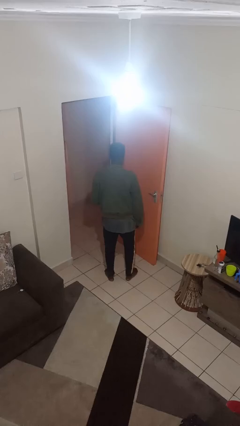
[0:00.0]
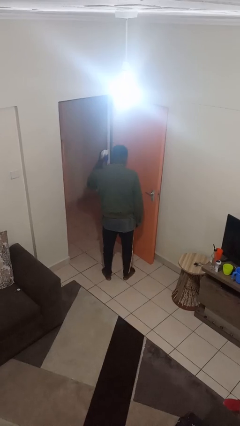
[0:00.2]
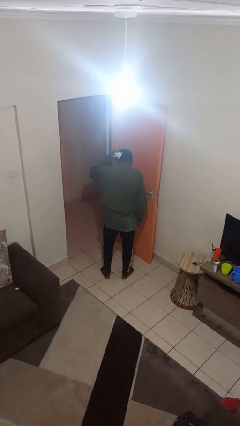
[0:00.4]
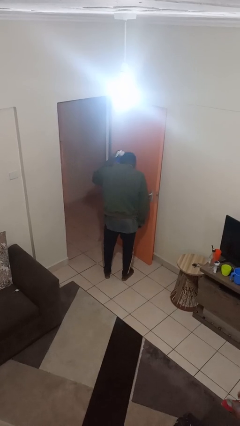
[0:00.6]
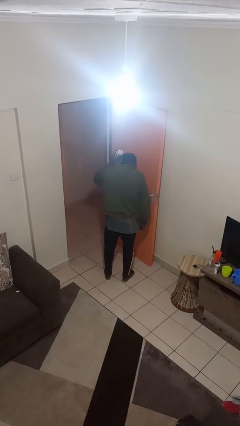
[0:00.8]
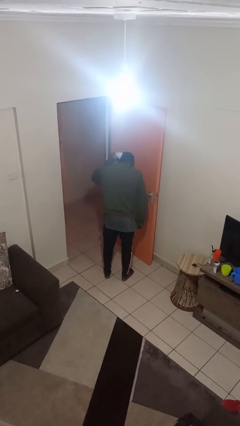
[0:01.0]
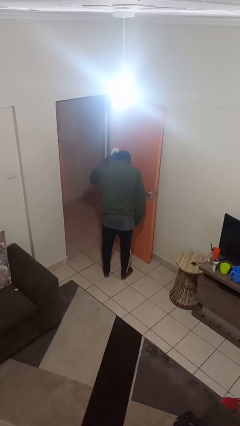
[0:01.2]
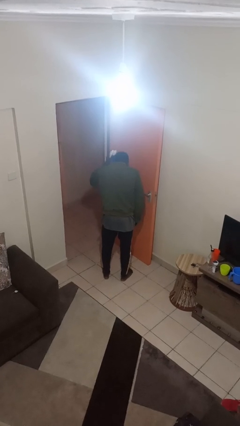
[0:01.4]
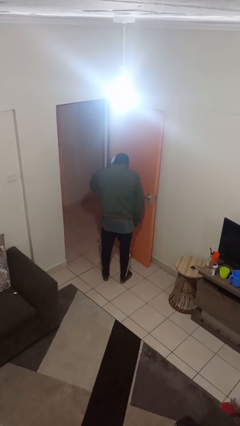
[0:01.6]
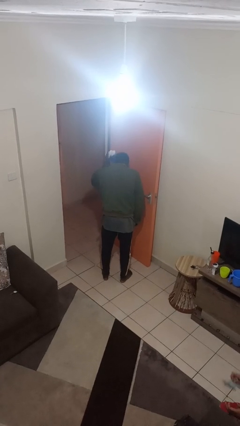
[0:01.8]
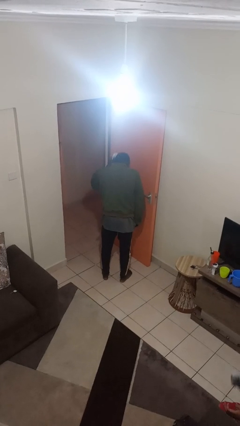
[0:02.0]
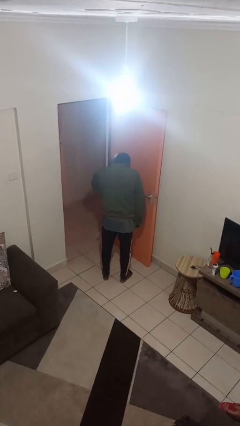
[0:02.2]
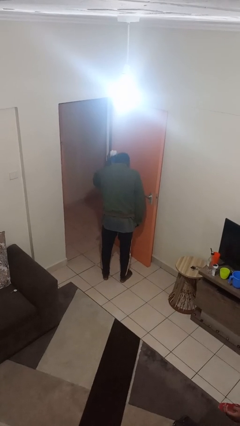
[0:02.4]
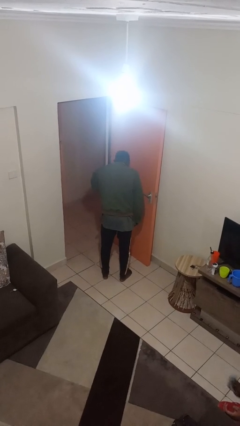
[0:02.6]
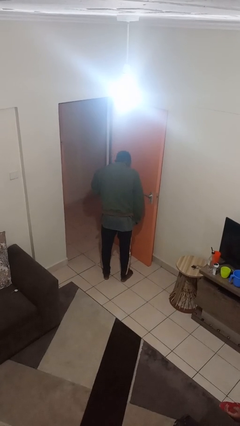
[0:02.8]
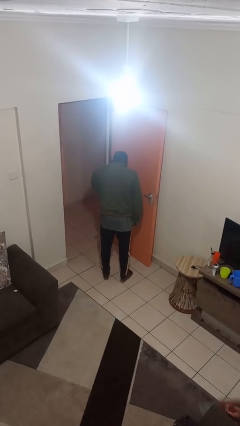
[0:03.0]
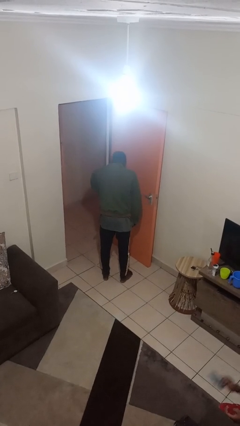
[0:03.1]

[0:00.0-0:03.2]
person brushes hair

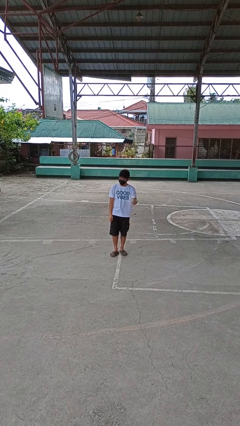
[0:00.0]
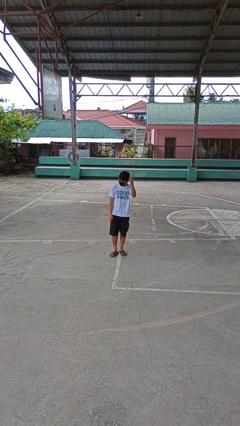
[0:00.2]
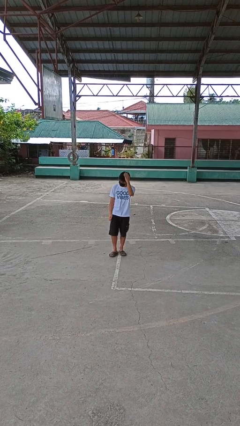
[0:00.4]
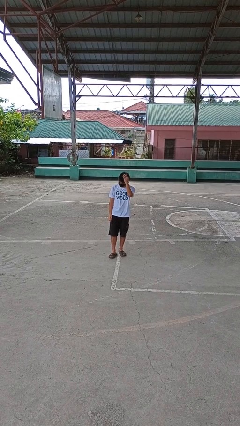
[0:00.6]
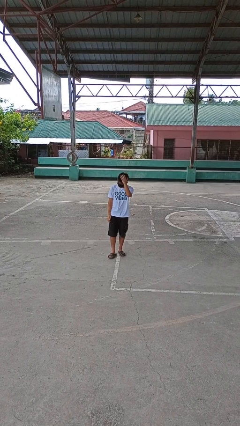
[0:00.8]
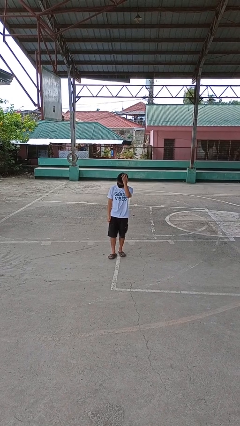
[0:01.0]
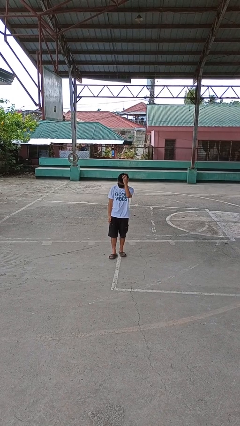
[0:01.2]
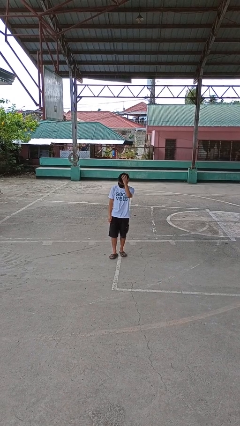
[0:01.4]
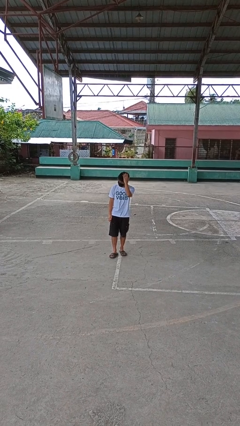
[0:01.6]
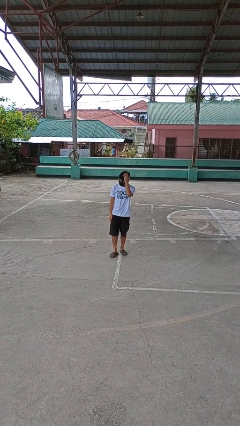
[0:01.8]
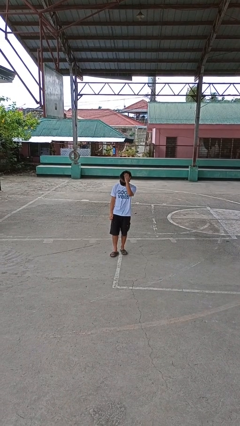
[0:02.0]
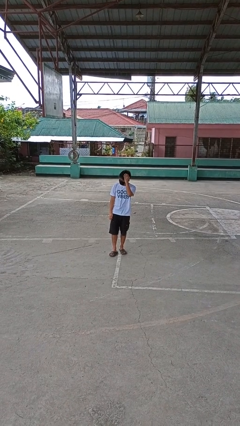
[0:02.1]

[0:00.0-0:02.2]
person pats head

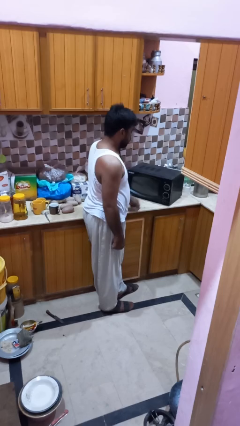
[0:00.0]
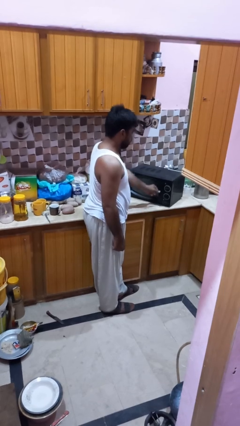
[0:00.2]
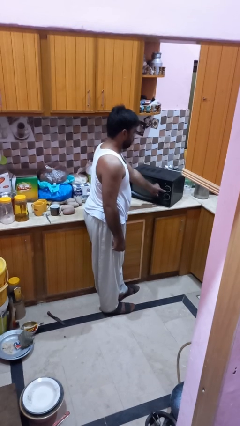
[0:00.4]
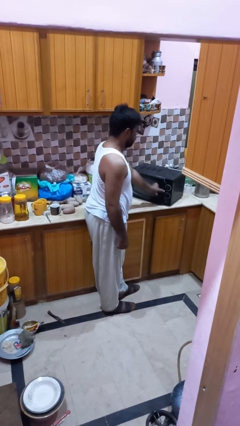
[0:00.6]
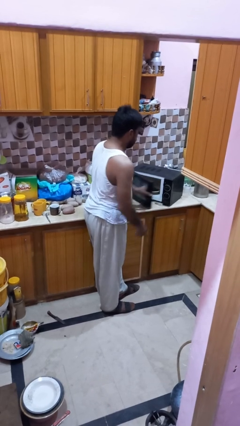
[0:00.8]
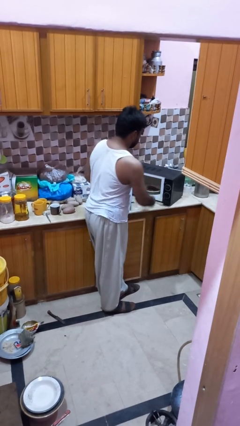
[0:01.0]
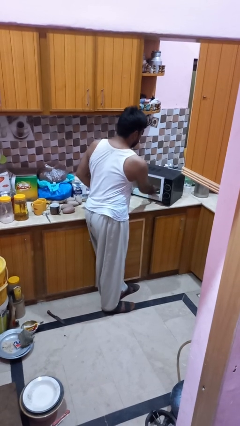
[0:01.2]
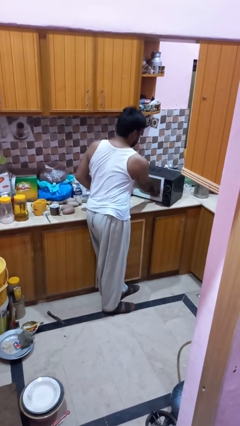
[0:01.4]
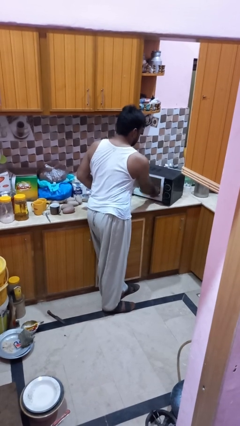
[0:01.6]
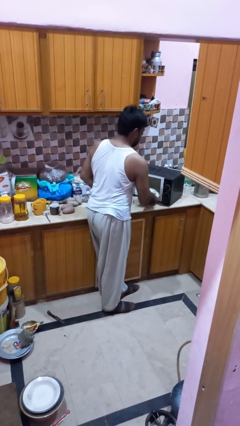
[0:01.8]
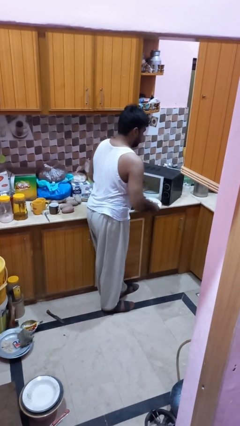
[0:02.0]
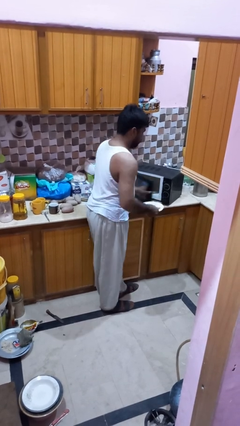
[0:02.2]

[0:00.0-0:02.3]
person takes object from microwave

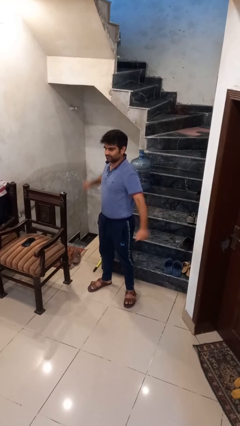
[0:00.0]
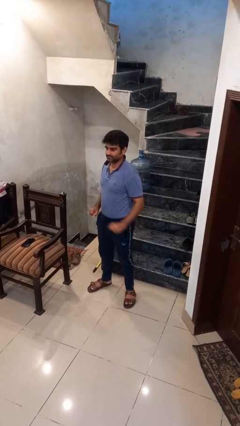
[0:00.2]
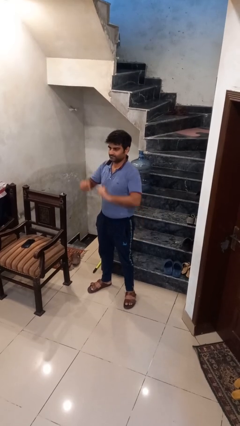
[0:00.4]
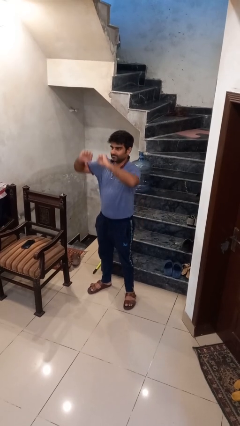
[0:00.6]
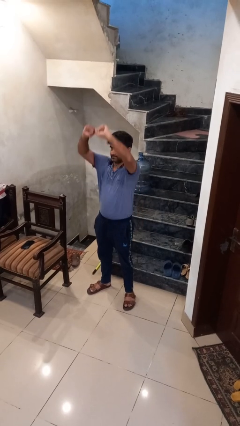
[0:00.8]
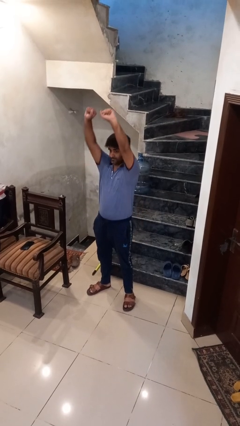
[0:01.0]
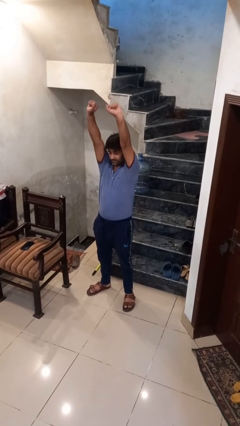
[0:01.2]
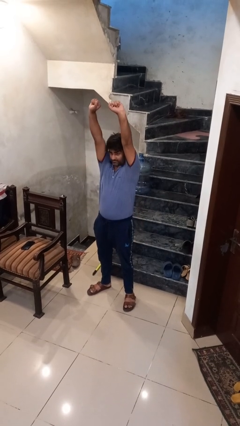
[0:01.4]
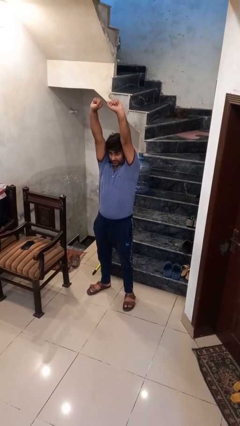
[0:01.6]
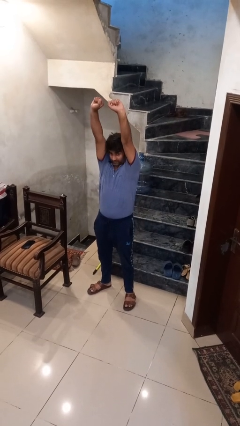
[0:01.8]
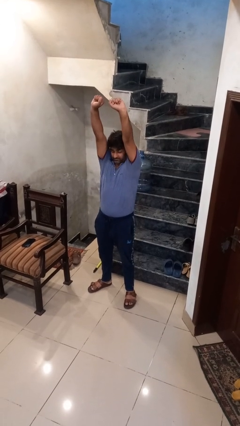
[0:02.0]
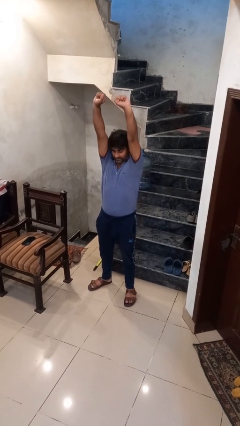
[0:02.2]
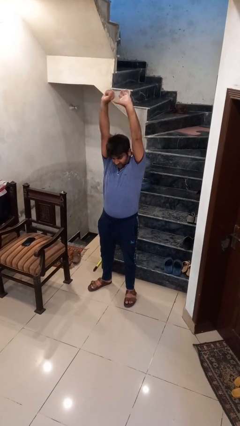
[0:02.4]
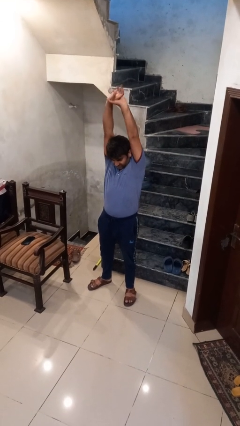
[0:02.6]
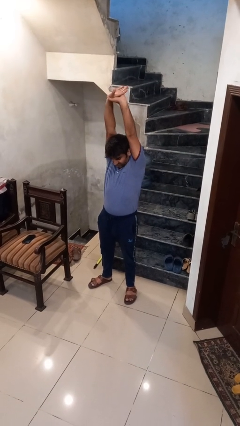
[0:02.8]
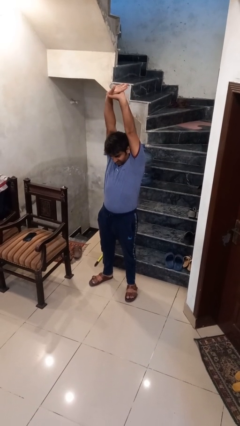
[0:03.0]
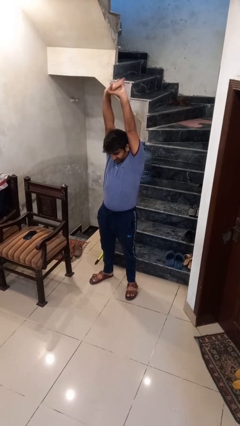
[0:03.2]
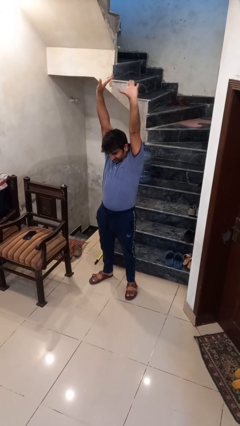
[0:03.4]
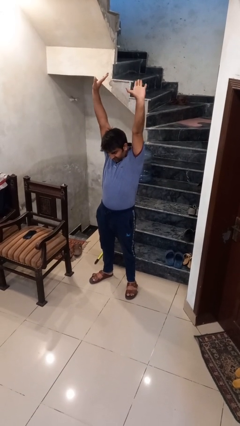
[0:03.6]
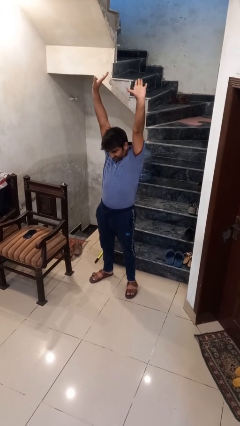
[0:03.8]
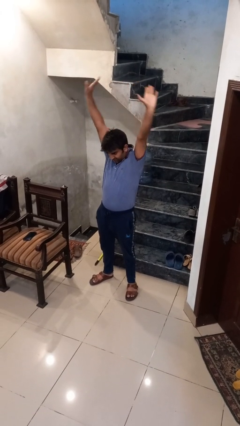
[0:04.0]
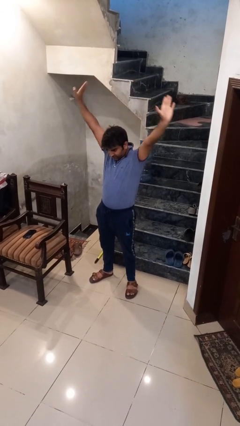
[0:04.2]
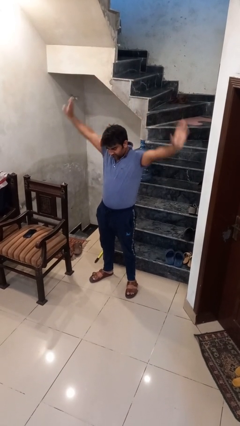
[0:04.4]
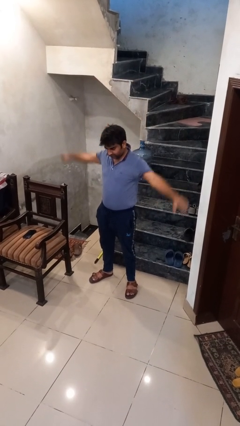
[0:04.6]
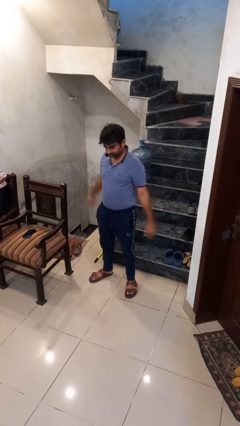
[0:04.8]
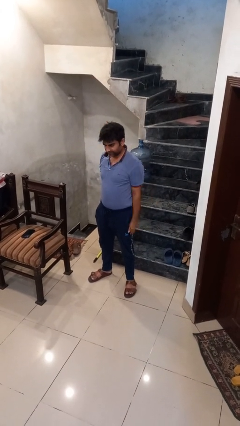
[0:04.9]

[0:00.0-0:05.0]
person stretches arms over head

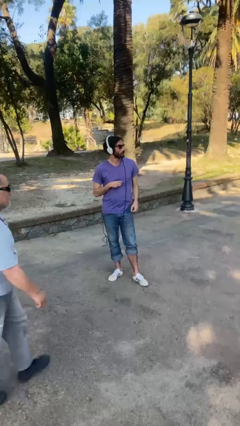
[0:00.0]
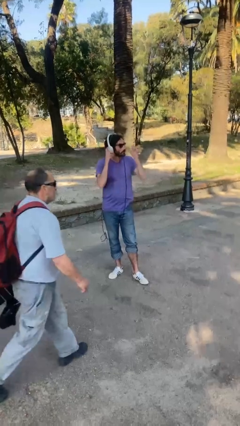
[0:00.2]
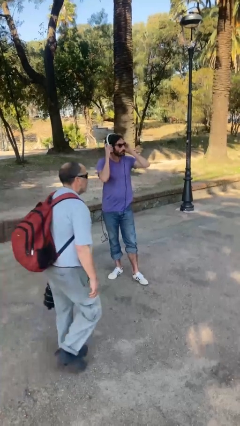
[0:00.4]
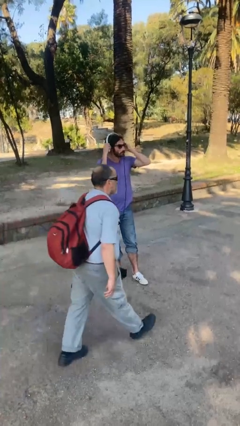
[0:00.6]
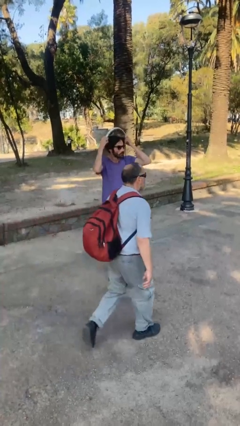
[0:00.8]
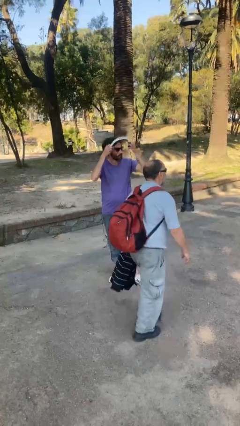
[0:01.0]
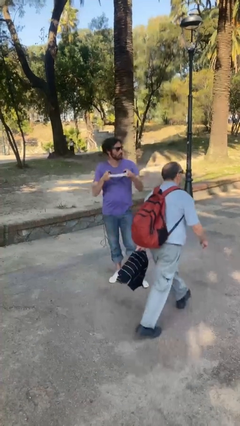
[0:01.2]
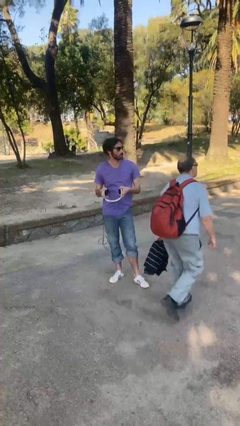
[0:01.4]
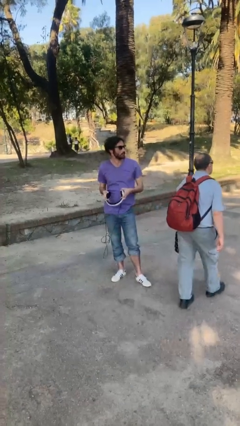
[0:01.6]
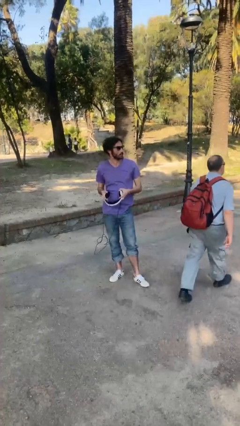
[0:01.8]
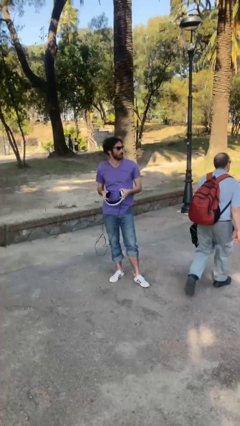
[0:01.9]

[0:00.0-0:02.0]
person takes off headphones

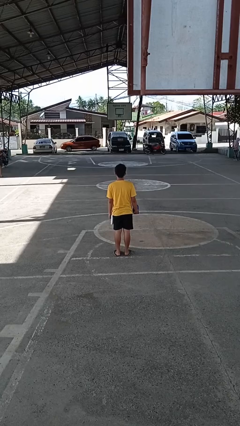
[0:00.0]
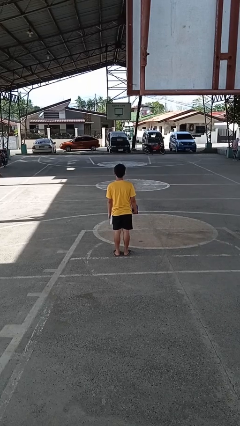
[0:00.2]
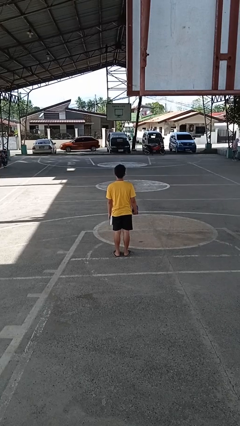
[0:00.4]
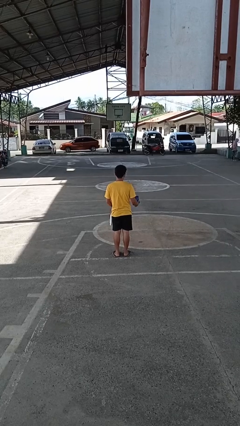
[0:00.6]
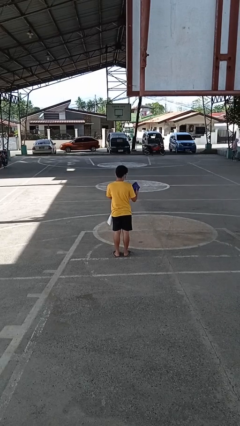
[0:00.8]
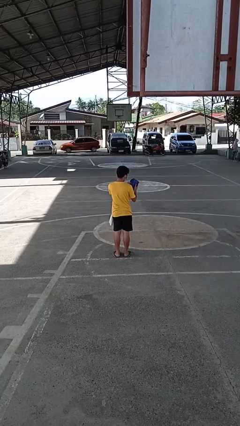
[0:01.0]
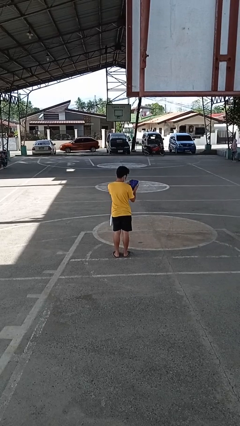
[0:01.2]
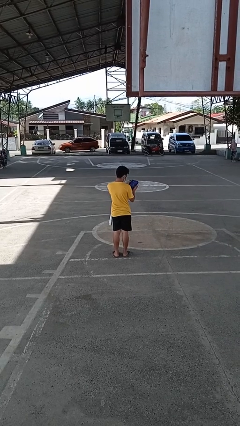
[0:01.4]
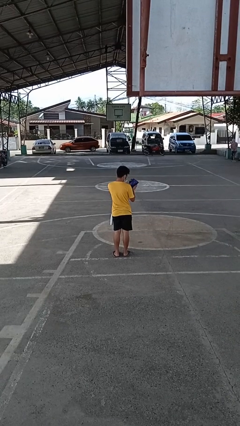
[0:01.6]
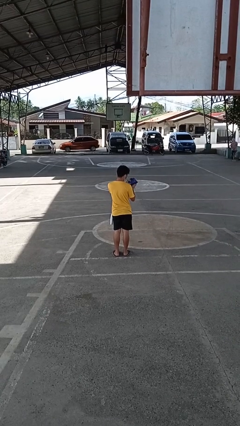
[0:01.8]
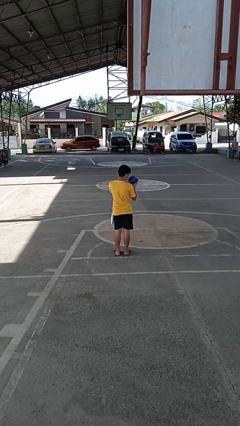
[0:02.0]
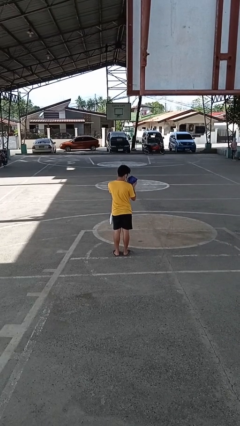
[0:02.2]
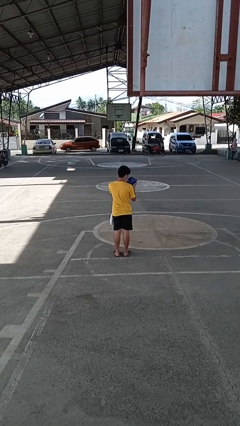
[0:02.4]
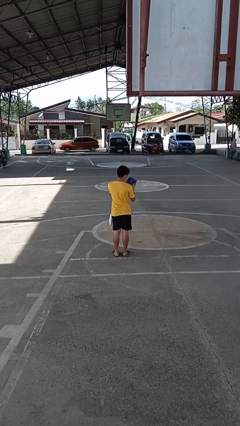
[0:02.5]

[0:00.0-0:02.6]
person searches in purse
